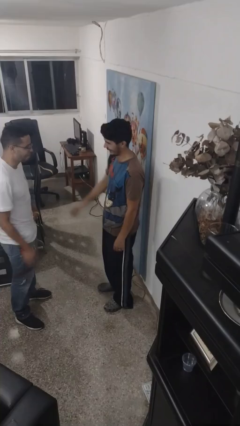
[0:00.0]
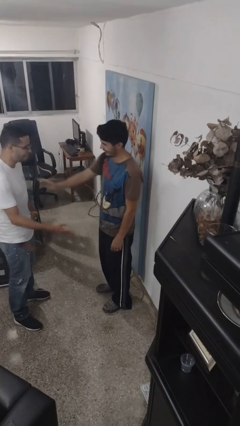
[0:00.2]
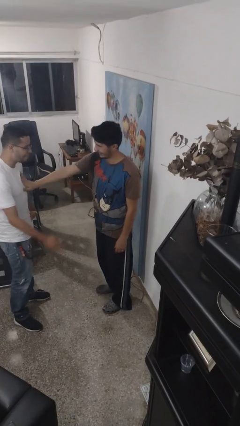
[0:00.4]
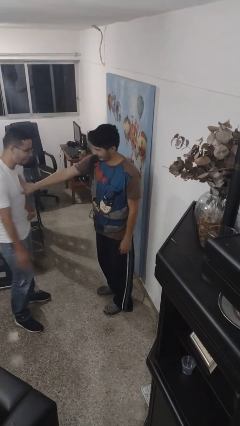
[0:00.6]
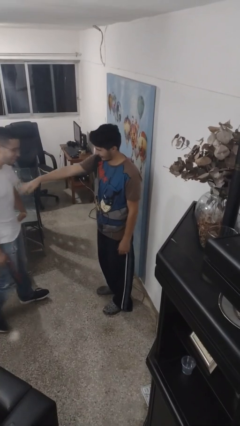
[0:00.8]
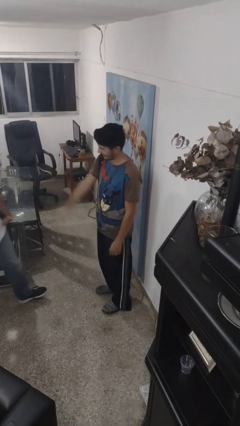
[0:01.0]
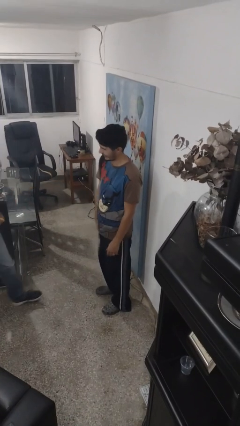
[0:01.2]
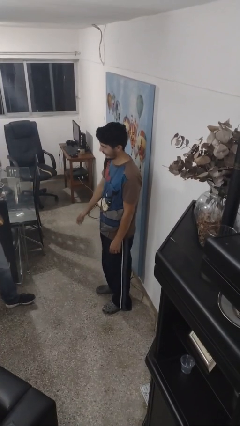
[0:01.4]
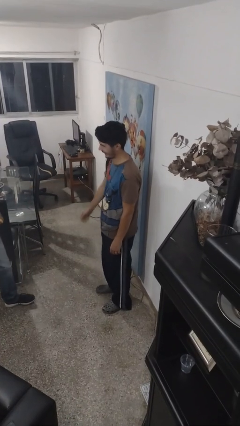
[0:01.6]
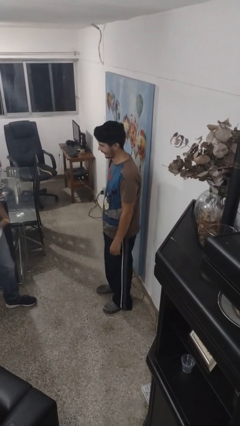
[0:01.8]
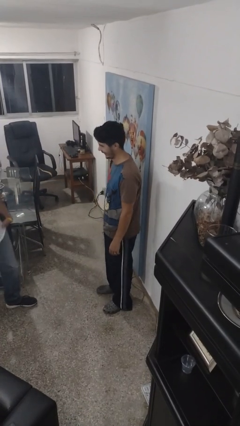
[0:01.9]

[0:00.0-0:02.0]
person shoves person

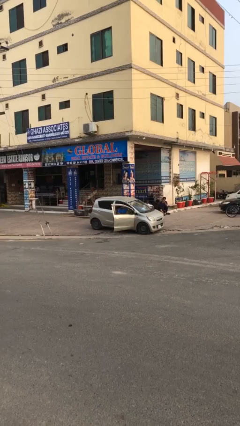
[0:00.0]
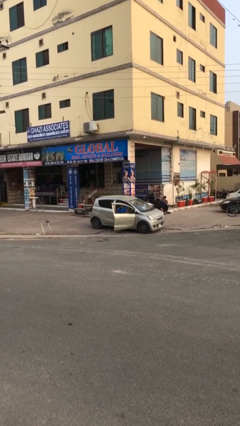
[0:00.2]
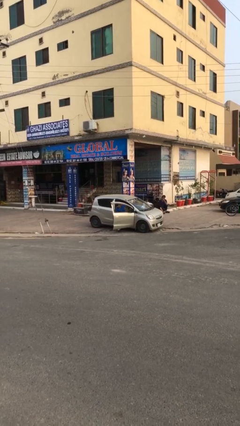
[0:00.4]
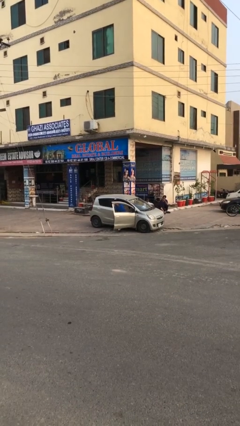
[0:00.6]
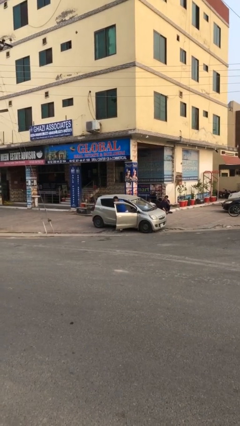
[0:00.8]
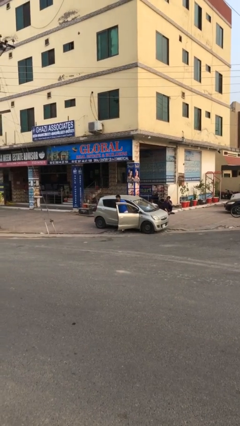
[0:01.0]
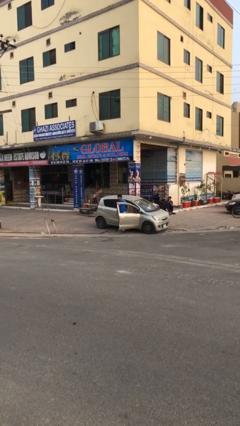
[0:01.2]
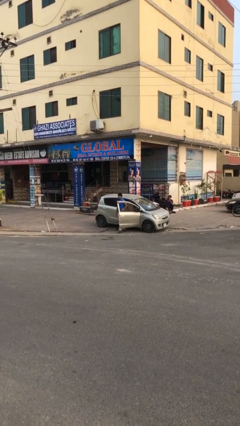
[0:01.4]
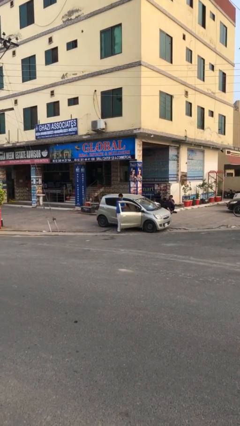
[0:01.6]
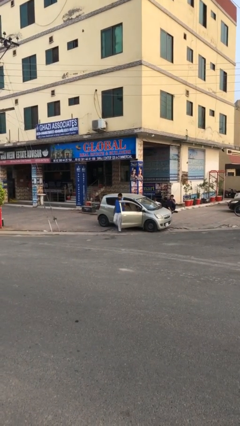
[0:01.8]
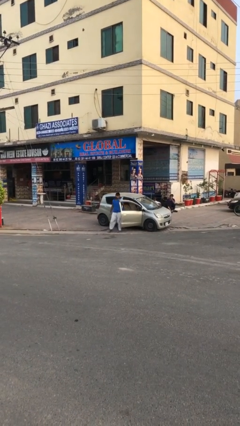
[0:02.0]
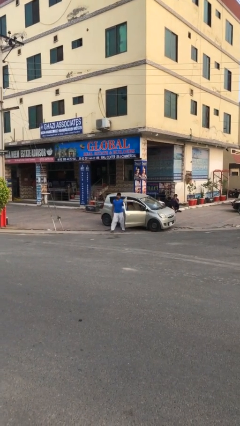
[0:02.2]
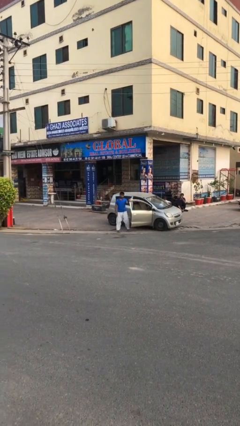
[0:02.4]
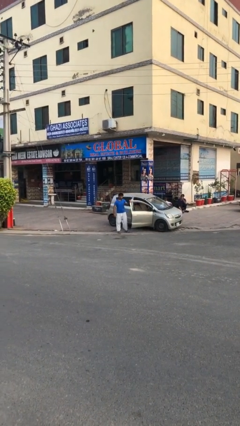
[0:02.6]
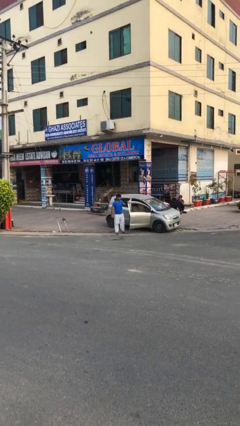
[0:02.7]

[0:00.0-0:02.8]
person exits car

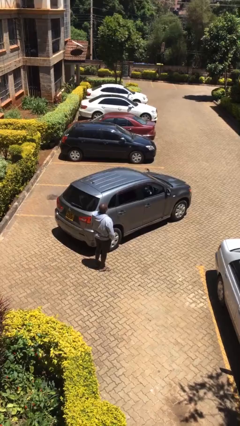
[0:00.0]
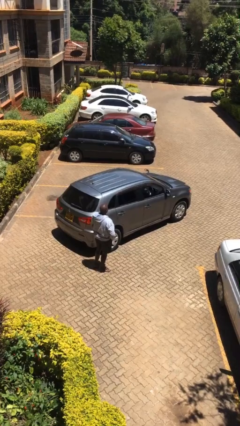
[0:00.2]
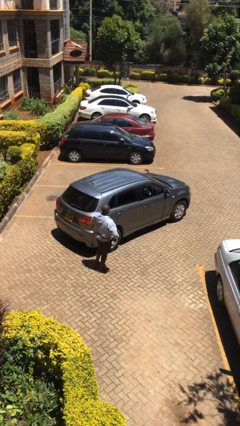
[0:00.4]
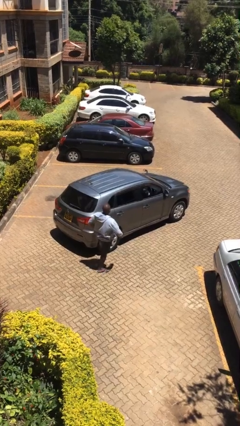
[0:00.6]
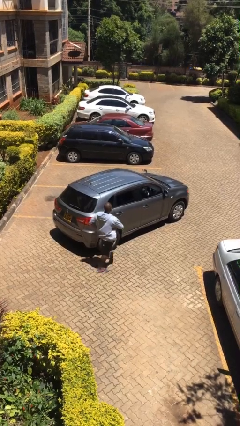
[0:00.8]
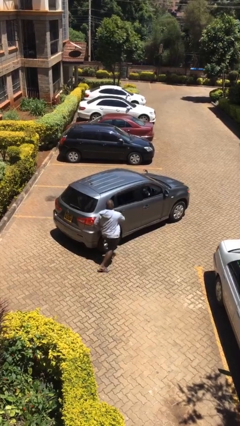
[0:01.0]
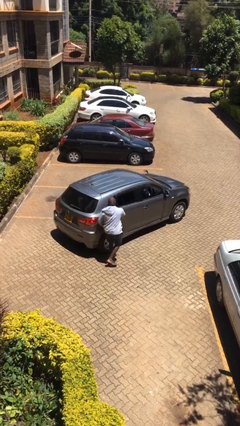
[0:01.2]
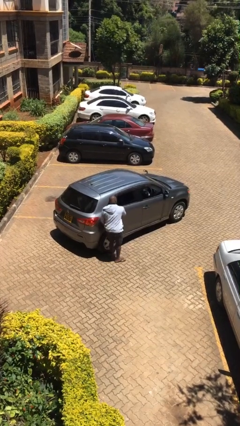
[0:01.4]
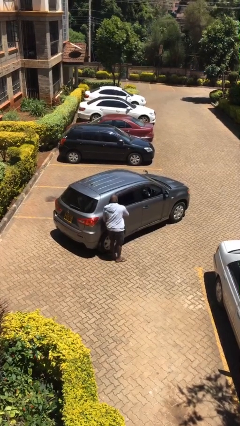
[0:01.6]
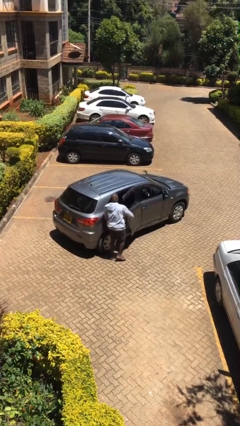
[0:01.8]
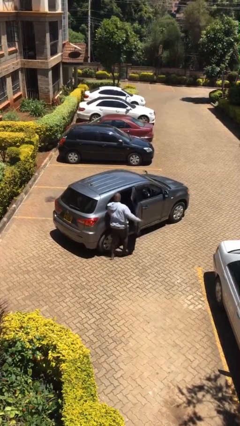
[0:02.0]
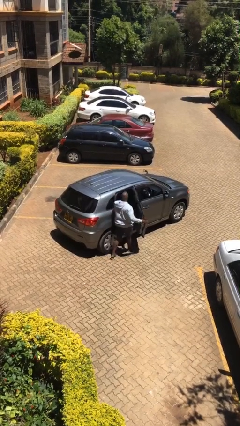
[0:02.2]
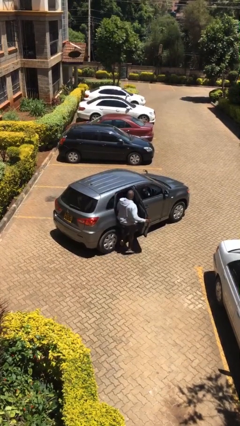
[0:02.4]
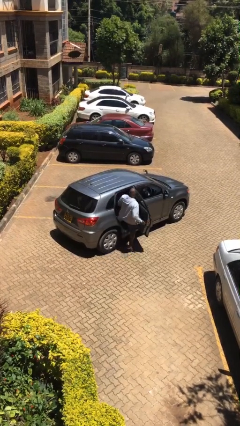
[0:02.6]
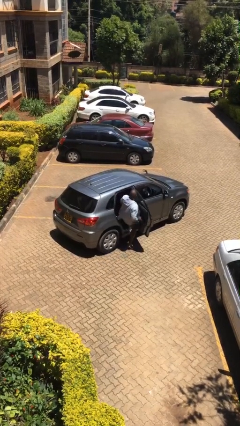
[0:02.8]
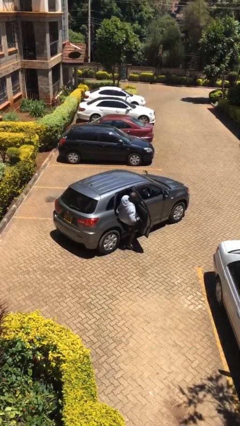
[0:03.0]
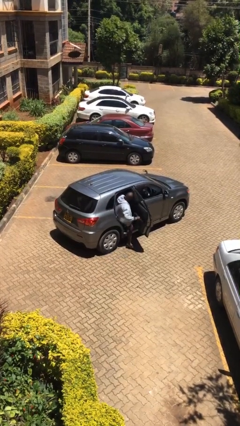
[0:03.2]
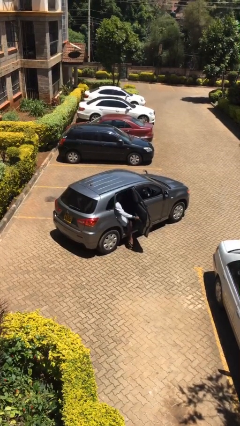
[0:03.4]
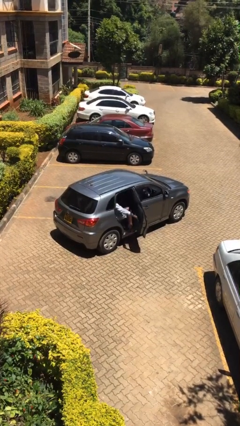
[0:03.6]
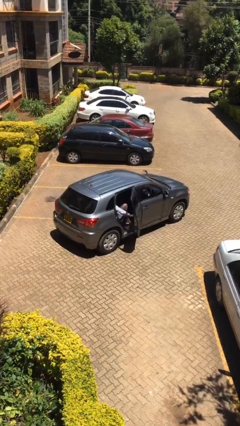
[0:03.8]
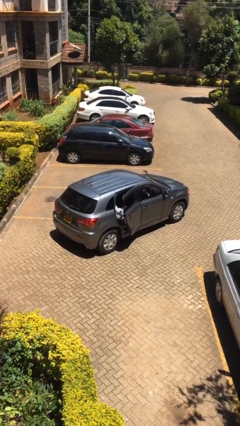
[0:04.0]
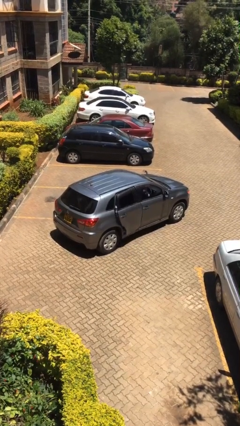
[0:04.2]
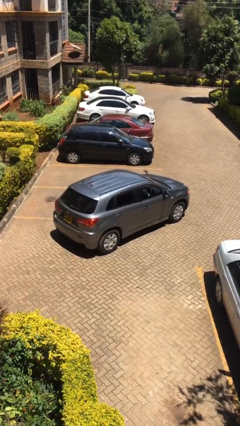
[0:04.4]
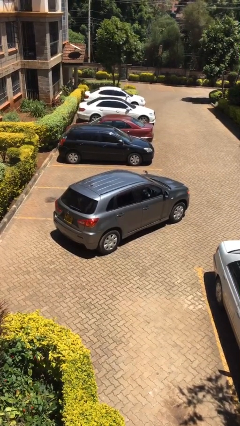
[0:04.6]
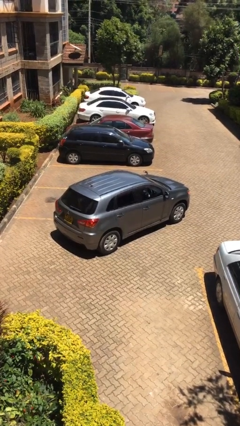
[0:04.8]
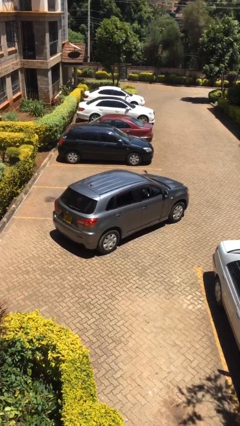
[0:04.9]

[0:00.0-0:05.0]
car picks up person

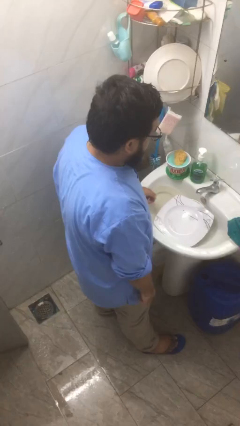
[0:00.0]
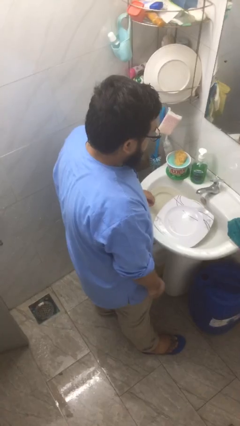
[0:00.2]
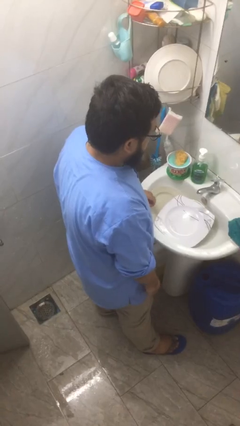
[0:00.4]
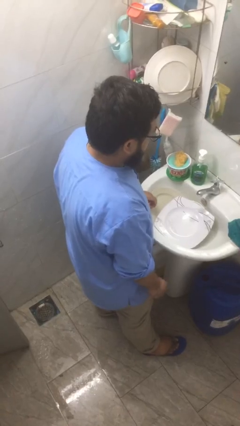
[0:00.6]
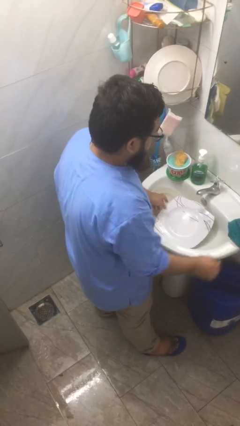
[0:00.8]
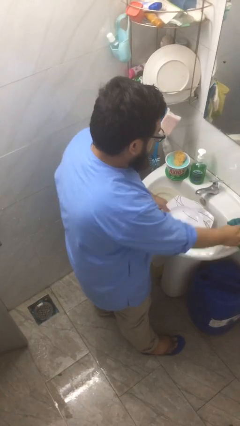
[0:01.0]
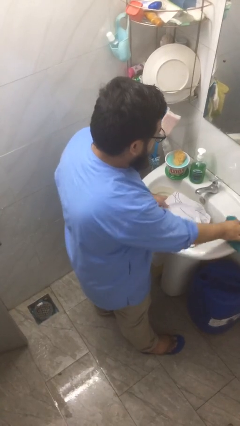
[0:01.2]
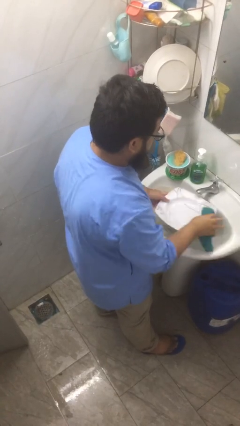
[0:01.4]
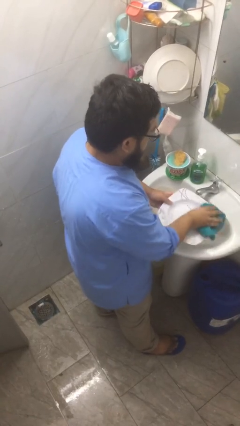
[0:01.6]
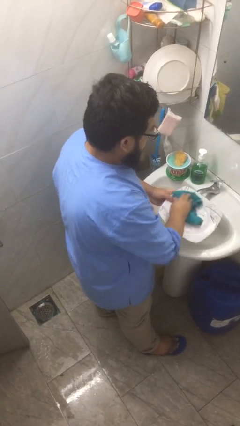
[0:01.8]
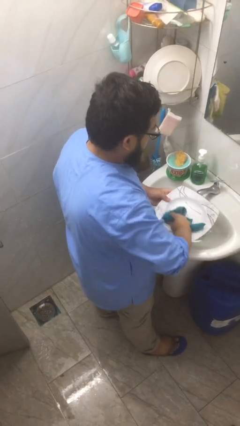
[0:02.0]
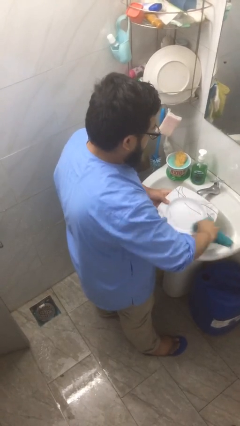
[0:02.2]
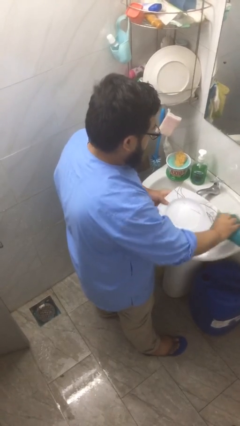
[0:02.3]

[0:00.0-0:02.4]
person dries dish

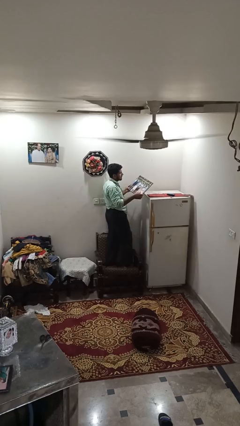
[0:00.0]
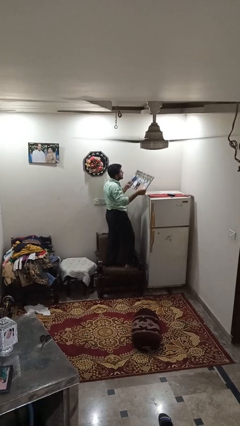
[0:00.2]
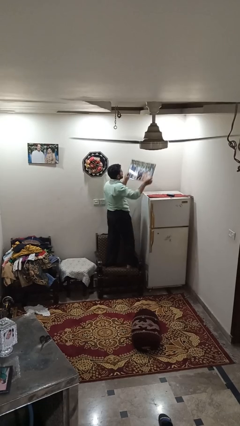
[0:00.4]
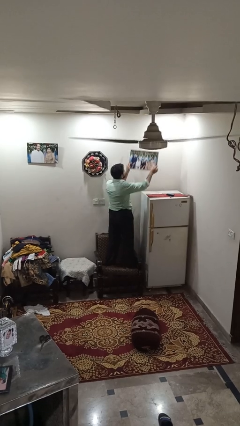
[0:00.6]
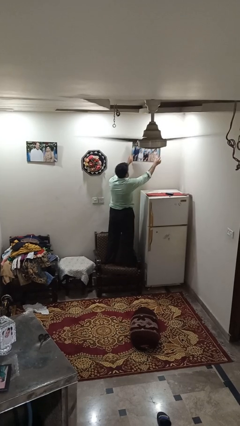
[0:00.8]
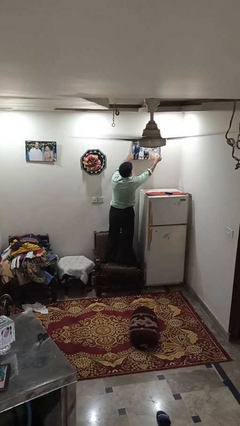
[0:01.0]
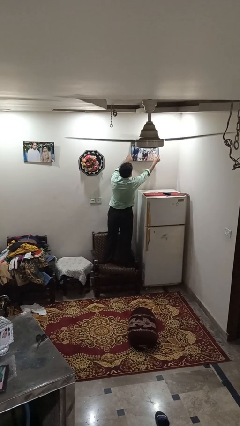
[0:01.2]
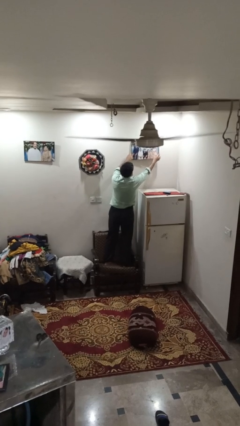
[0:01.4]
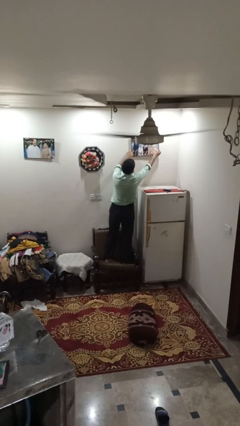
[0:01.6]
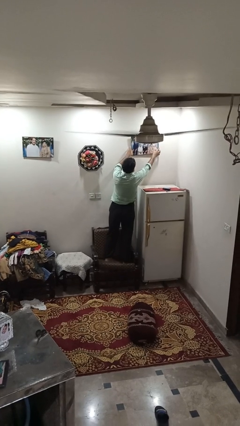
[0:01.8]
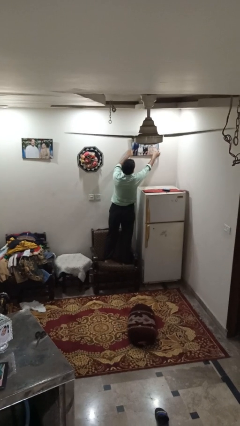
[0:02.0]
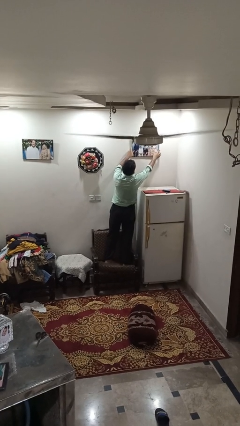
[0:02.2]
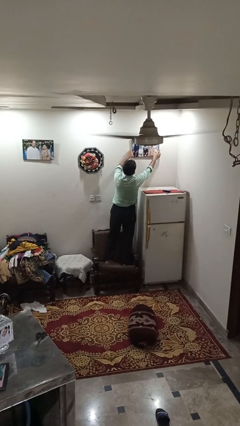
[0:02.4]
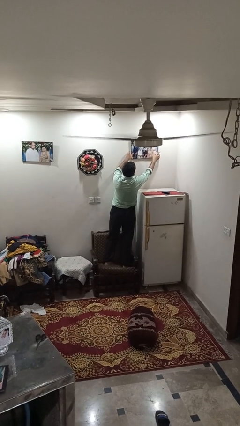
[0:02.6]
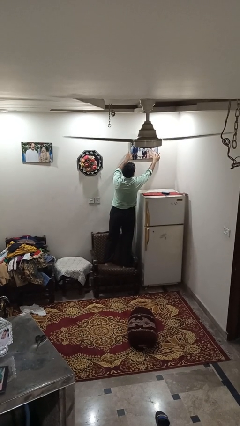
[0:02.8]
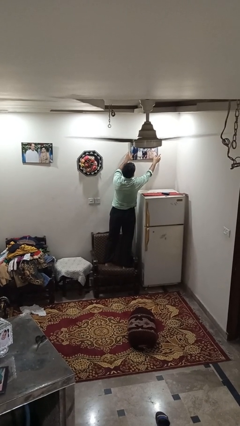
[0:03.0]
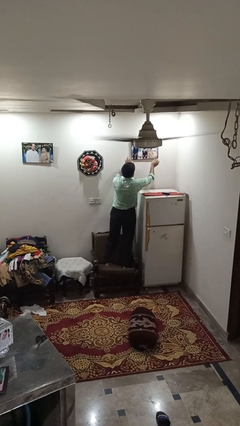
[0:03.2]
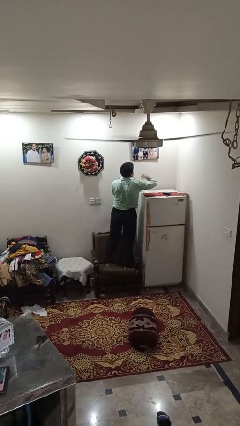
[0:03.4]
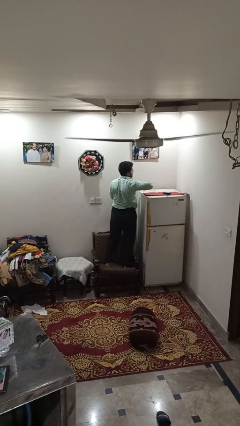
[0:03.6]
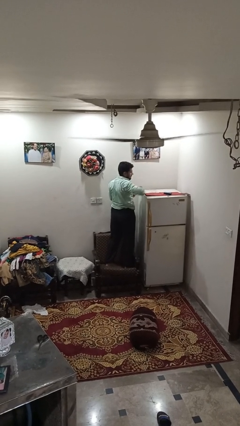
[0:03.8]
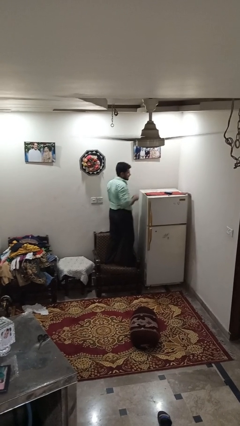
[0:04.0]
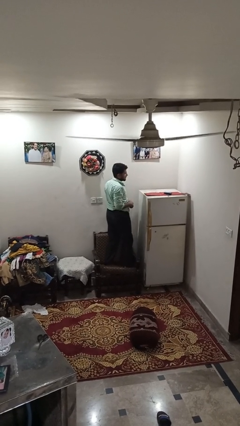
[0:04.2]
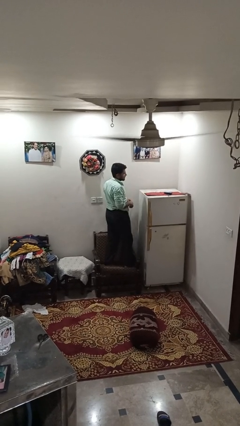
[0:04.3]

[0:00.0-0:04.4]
person puts up picture frame

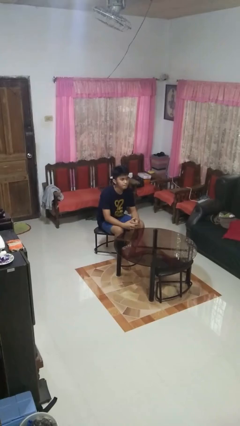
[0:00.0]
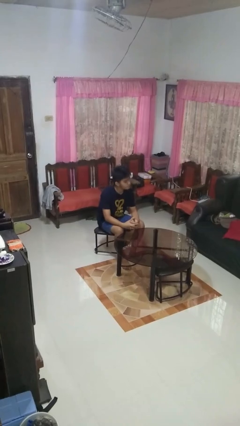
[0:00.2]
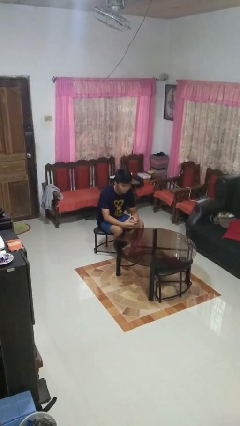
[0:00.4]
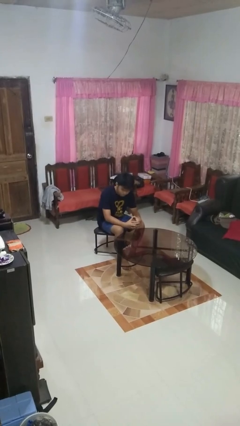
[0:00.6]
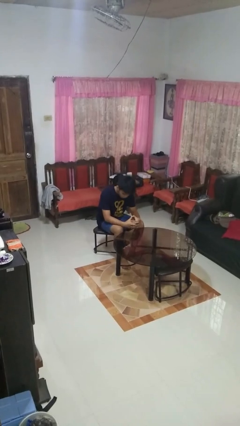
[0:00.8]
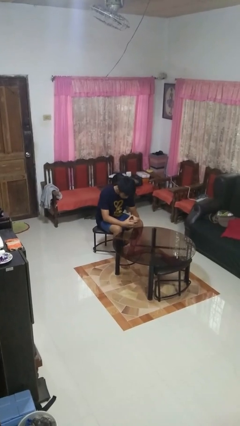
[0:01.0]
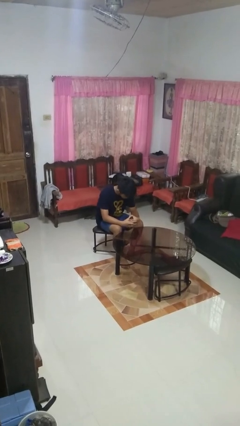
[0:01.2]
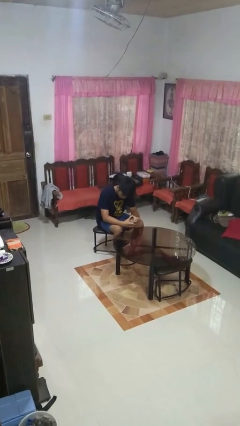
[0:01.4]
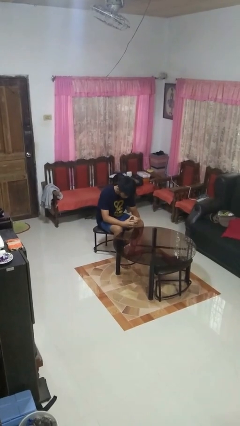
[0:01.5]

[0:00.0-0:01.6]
person shakes head
